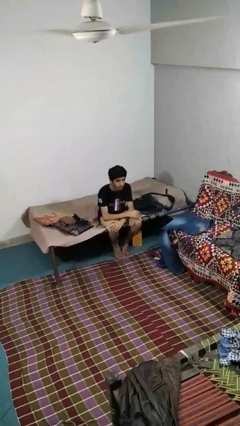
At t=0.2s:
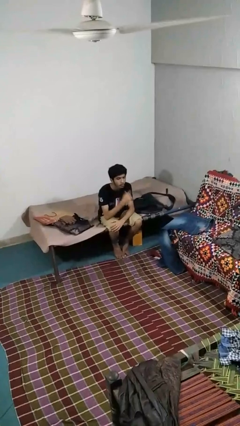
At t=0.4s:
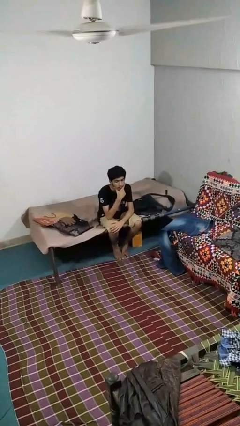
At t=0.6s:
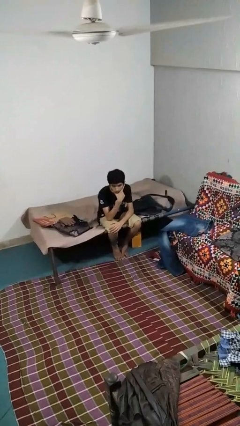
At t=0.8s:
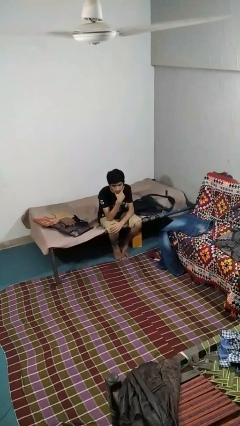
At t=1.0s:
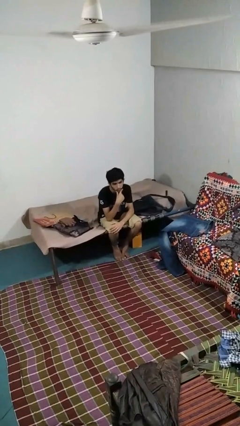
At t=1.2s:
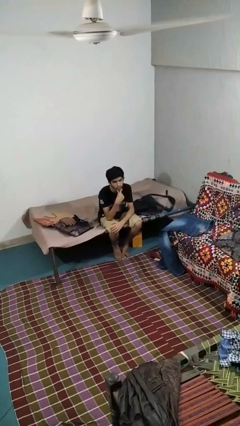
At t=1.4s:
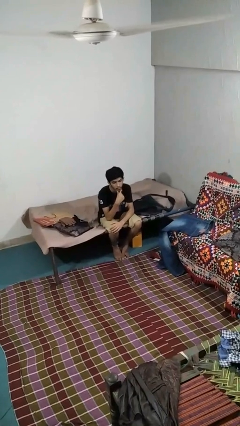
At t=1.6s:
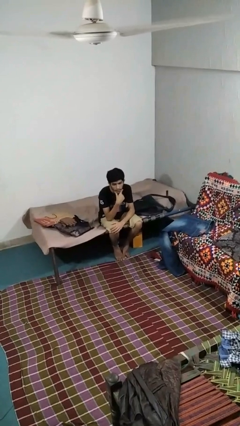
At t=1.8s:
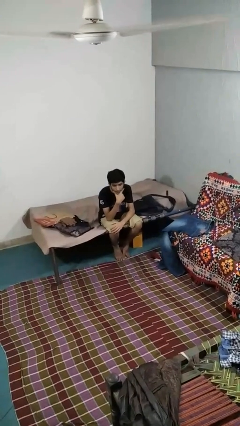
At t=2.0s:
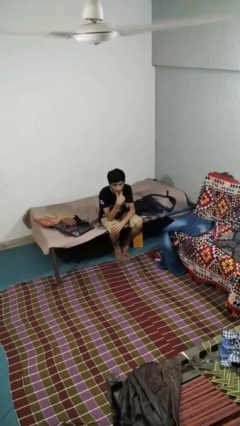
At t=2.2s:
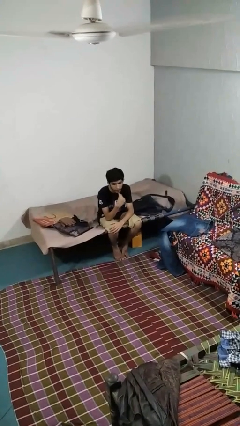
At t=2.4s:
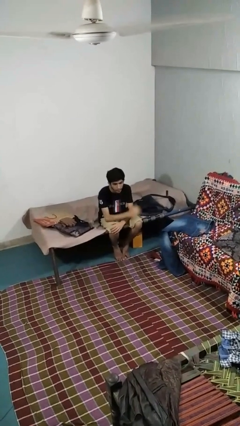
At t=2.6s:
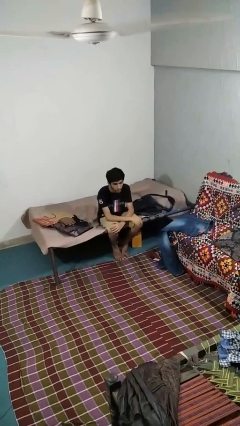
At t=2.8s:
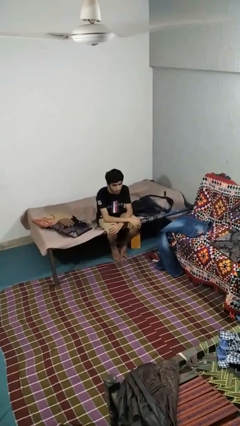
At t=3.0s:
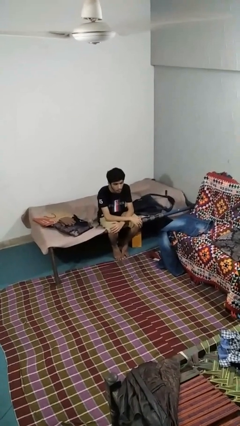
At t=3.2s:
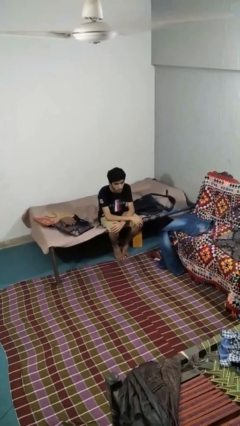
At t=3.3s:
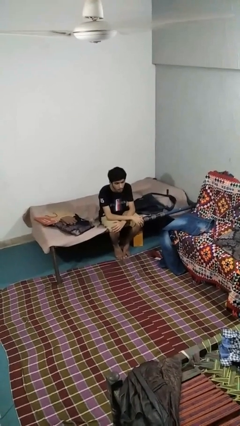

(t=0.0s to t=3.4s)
person strokes chin

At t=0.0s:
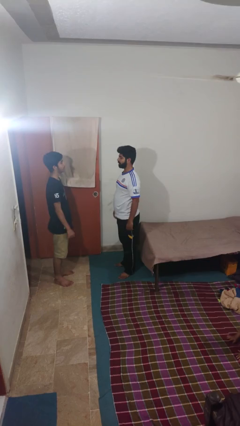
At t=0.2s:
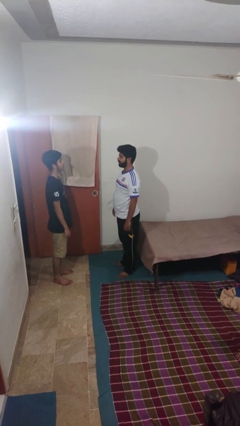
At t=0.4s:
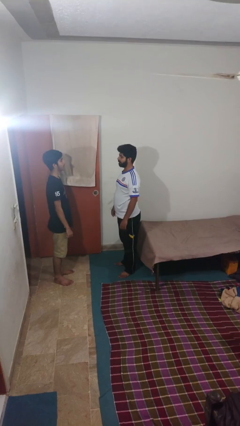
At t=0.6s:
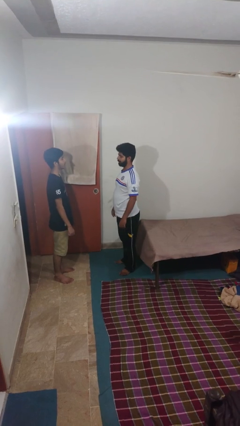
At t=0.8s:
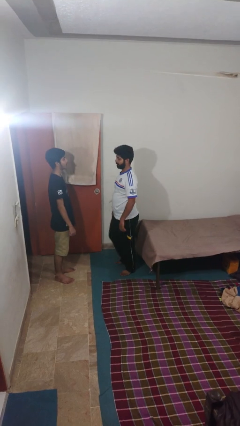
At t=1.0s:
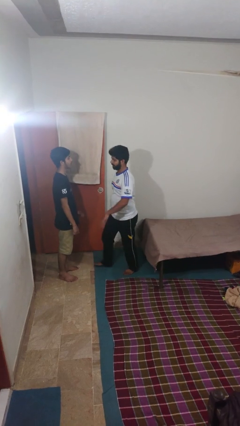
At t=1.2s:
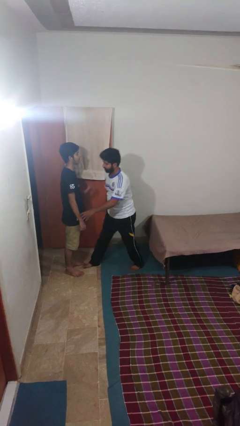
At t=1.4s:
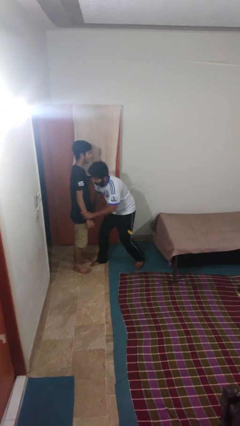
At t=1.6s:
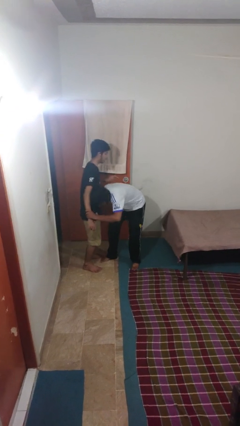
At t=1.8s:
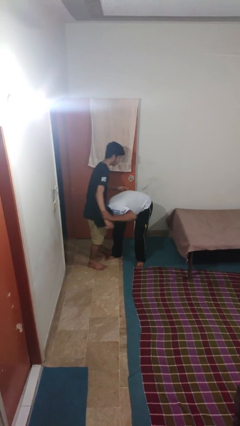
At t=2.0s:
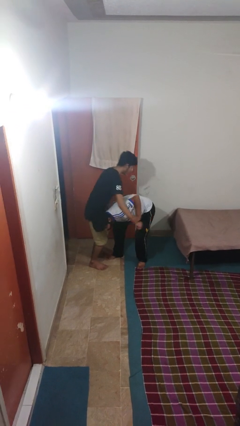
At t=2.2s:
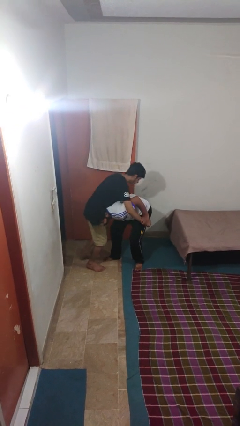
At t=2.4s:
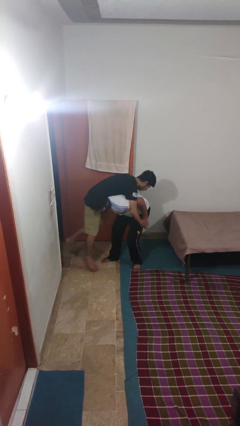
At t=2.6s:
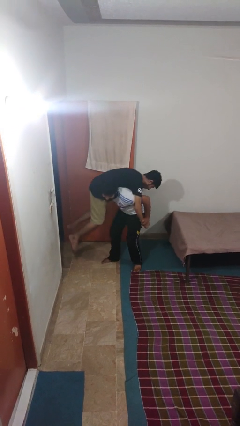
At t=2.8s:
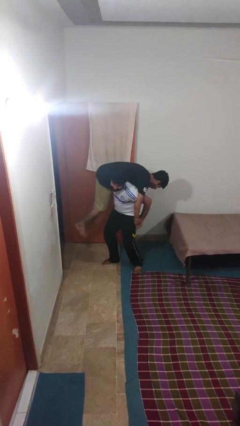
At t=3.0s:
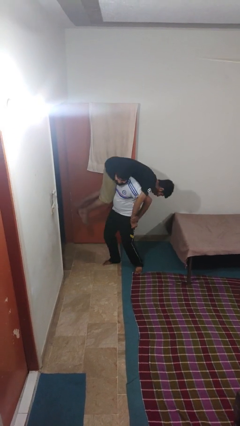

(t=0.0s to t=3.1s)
person carries person over shoulder

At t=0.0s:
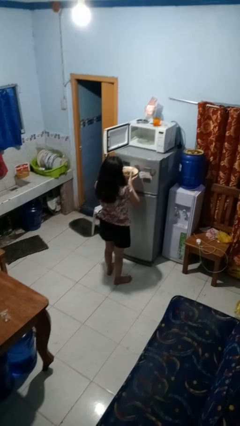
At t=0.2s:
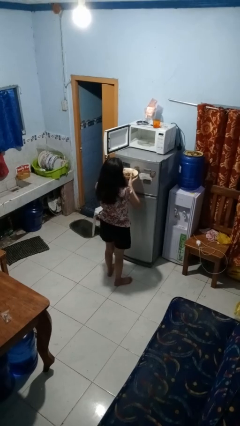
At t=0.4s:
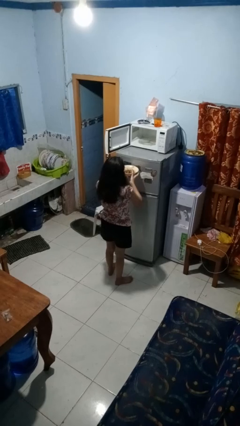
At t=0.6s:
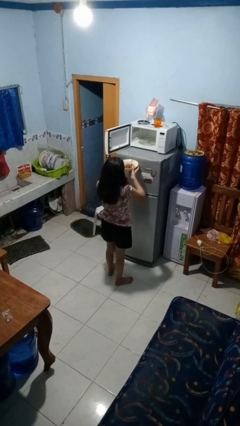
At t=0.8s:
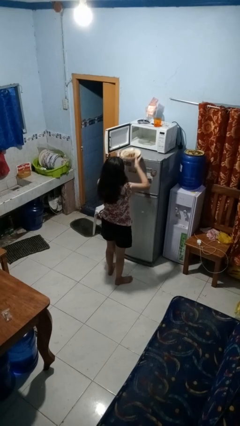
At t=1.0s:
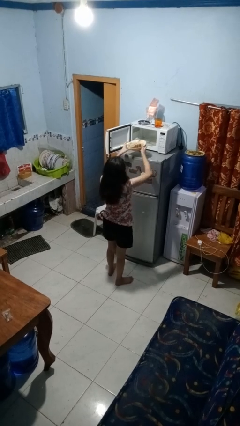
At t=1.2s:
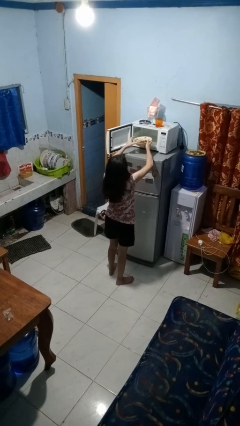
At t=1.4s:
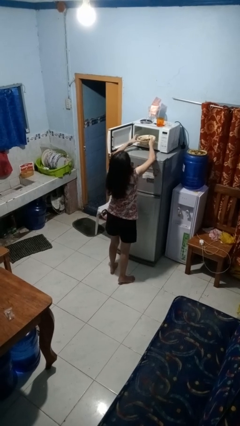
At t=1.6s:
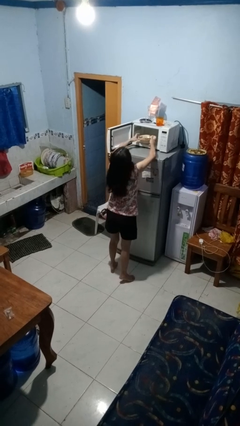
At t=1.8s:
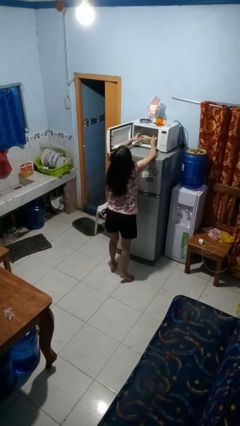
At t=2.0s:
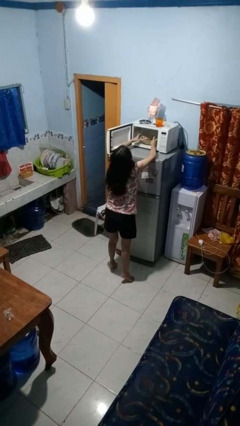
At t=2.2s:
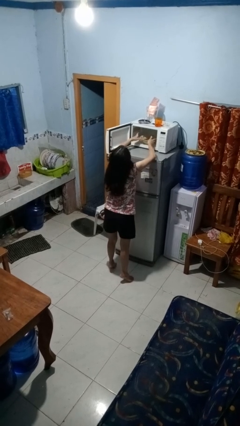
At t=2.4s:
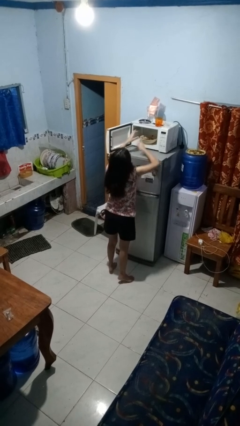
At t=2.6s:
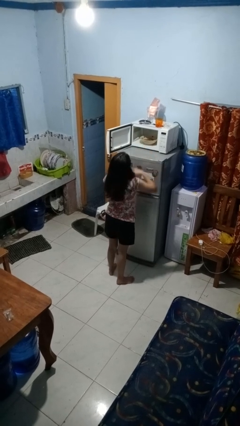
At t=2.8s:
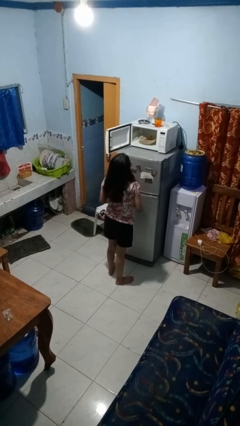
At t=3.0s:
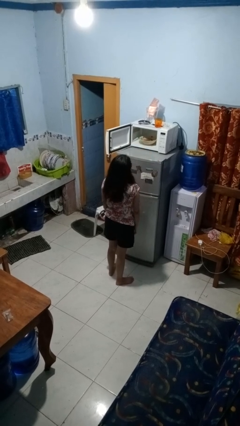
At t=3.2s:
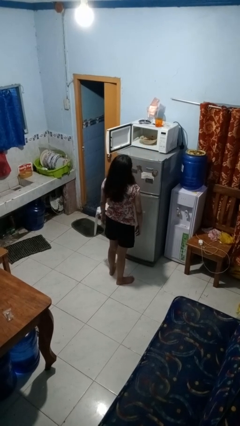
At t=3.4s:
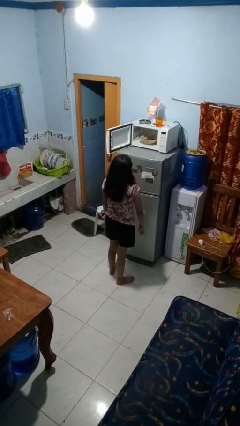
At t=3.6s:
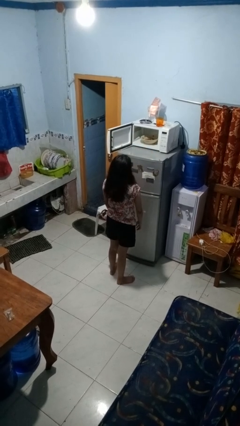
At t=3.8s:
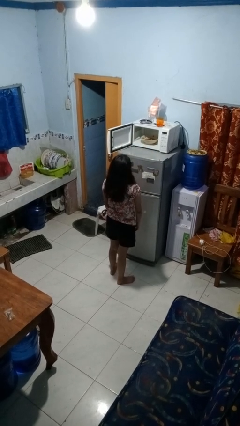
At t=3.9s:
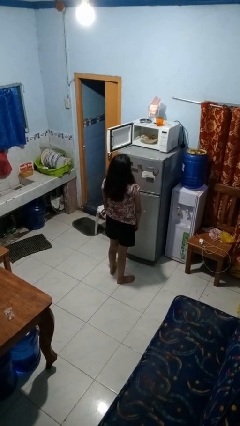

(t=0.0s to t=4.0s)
person puts object into microwave

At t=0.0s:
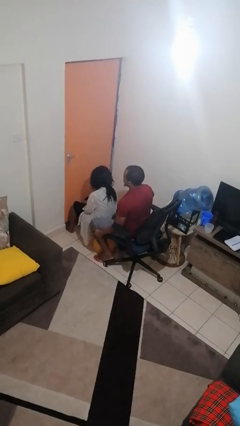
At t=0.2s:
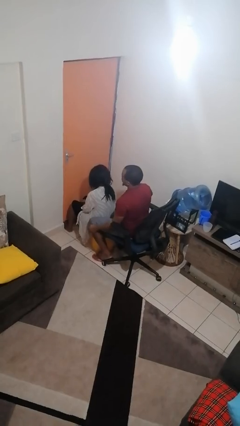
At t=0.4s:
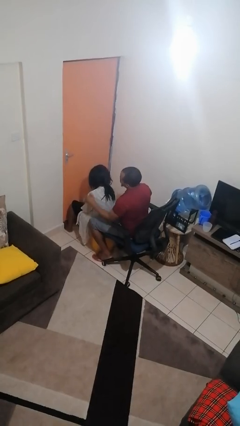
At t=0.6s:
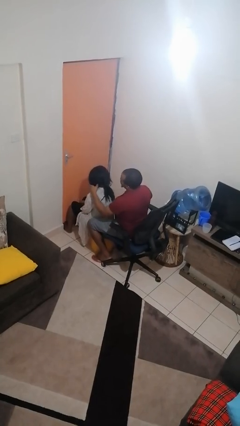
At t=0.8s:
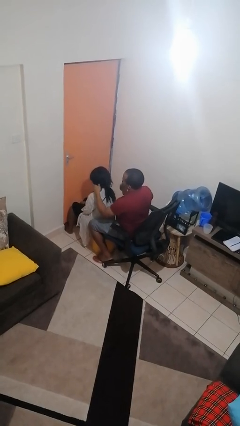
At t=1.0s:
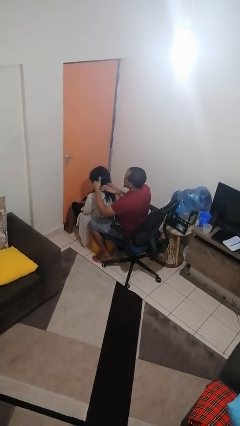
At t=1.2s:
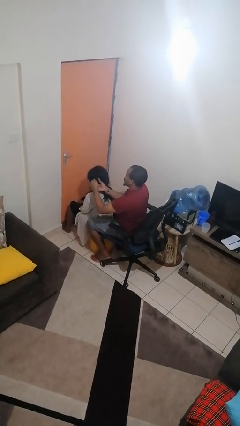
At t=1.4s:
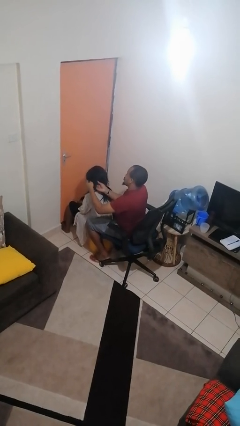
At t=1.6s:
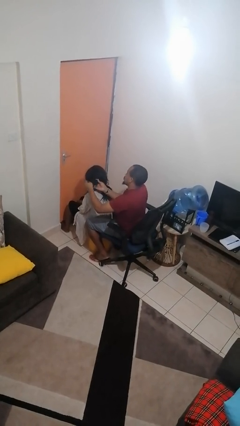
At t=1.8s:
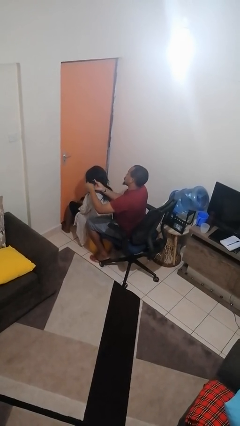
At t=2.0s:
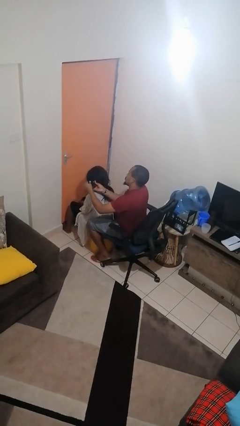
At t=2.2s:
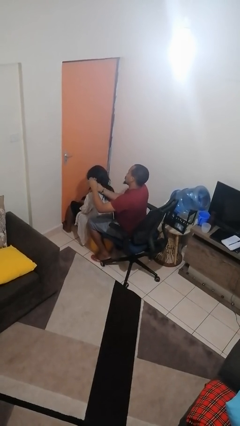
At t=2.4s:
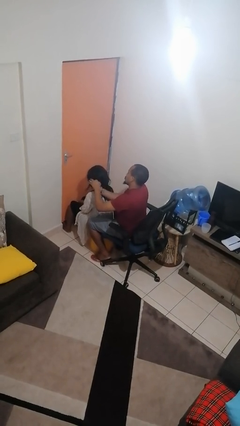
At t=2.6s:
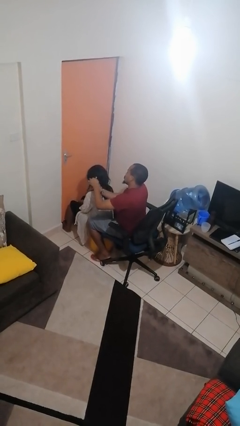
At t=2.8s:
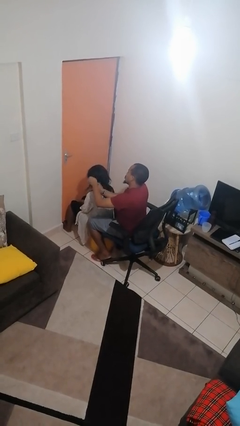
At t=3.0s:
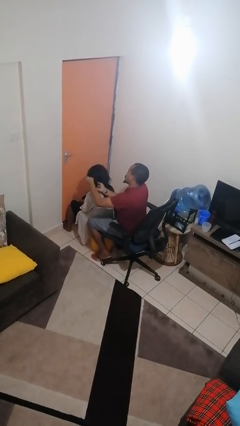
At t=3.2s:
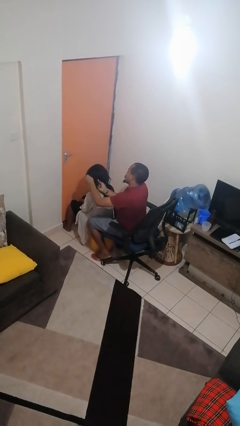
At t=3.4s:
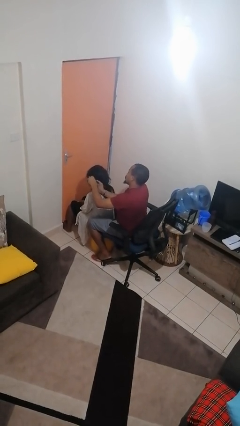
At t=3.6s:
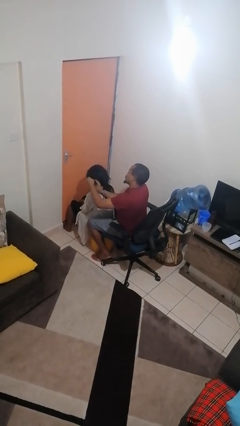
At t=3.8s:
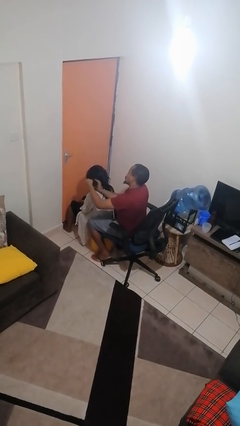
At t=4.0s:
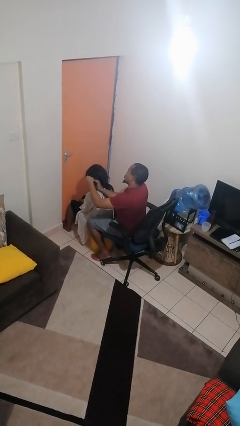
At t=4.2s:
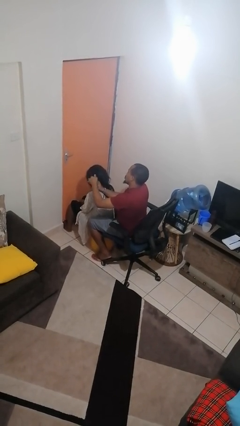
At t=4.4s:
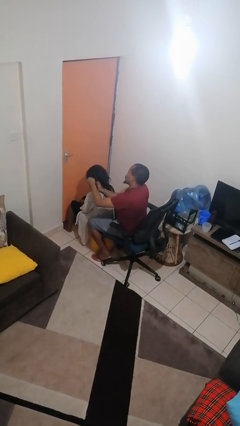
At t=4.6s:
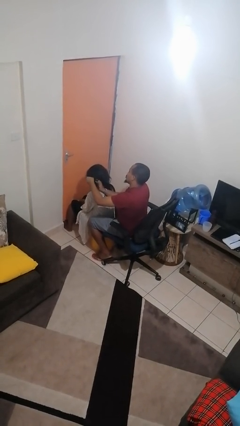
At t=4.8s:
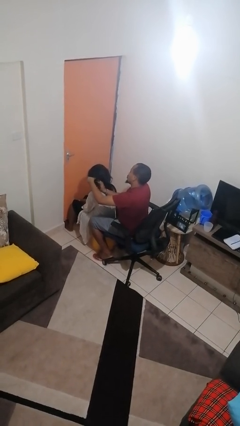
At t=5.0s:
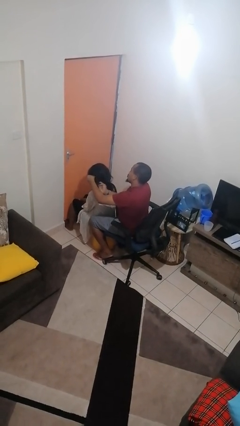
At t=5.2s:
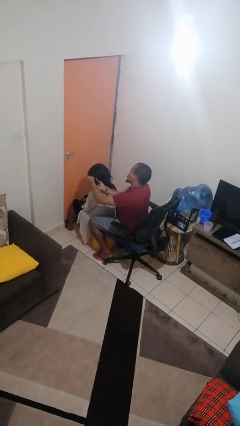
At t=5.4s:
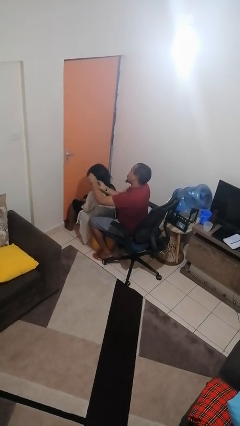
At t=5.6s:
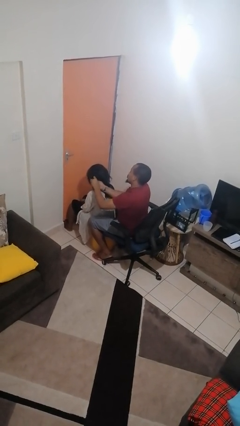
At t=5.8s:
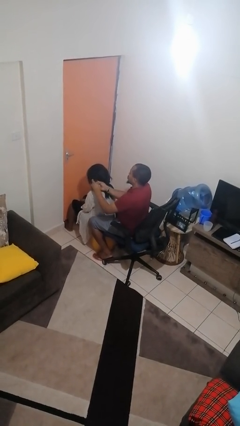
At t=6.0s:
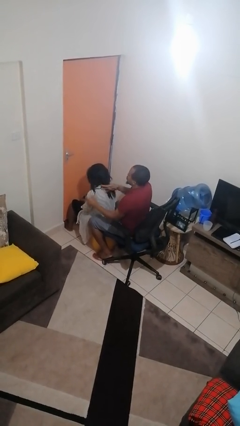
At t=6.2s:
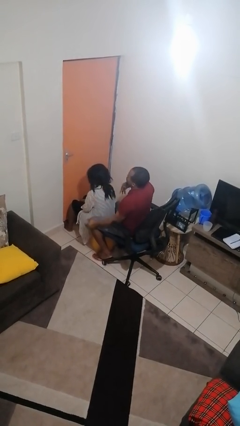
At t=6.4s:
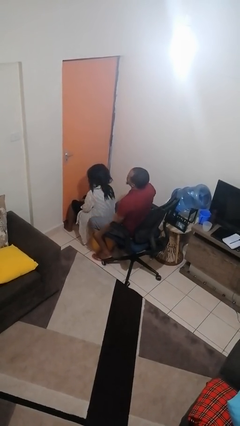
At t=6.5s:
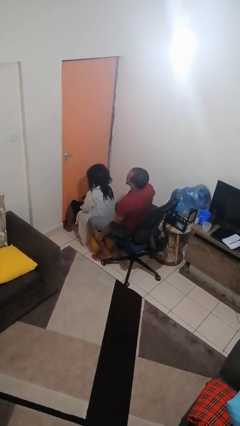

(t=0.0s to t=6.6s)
person braids hair of person

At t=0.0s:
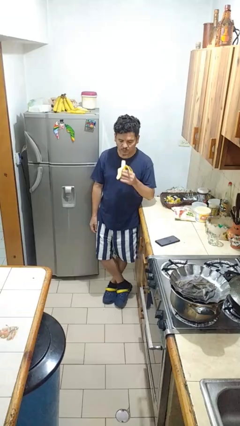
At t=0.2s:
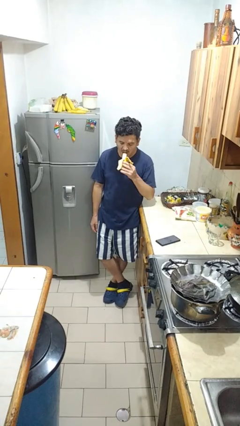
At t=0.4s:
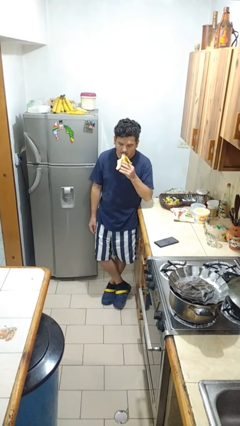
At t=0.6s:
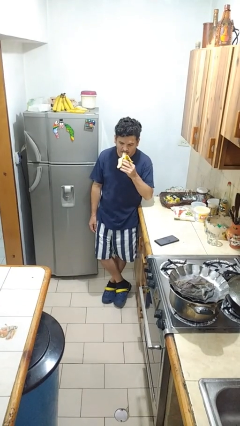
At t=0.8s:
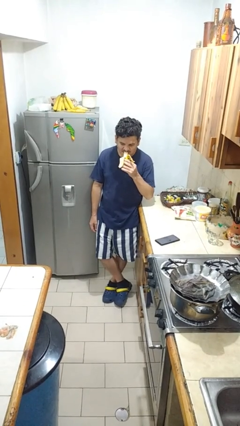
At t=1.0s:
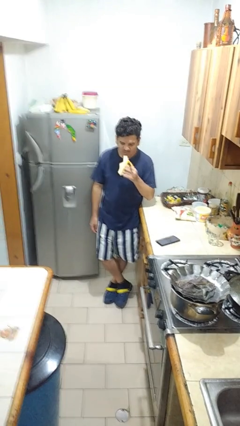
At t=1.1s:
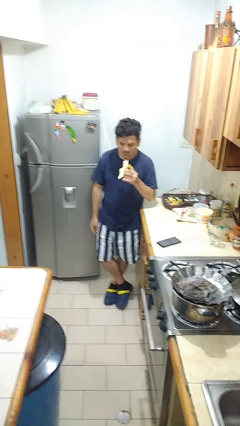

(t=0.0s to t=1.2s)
person eats banana
